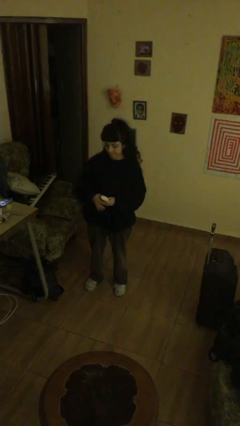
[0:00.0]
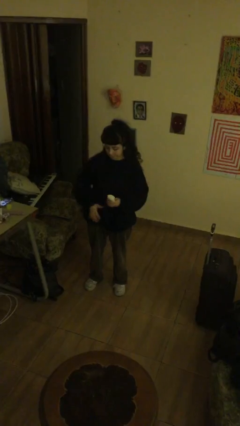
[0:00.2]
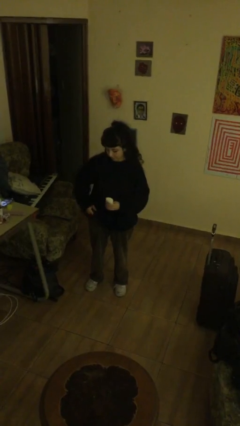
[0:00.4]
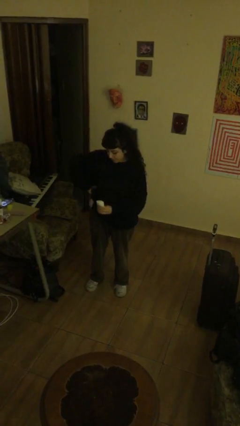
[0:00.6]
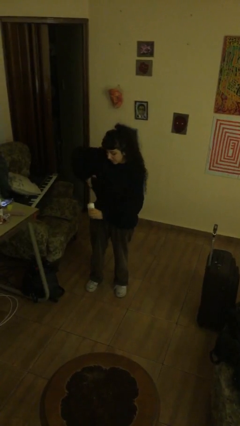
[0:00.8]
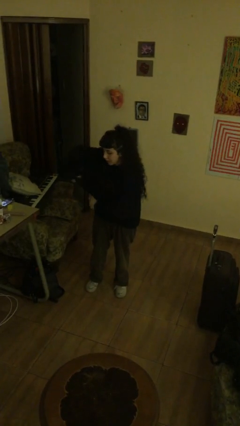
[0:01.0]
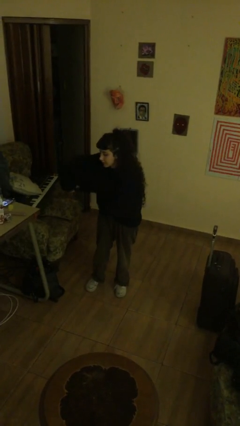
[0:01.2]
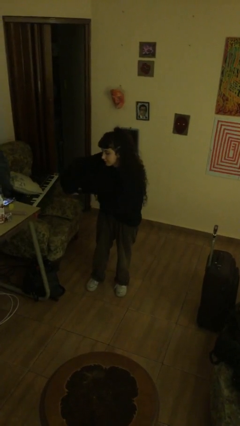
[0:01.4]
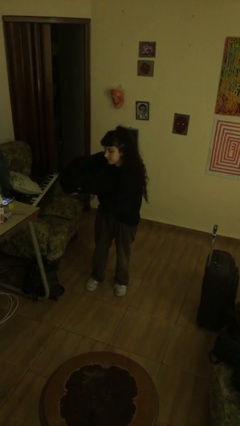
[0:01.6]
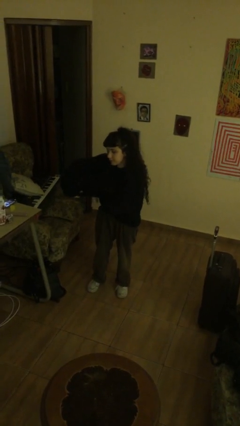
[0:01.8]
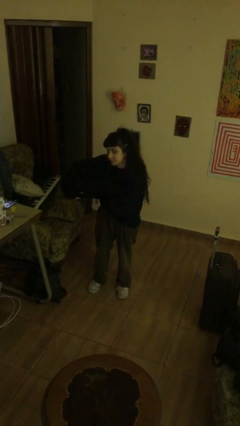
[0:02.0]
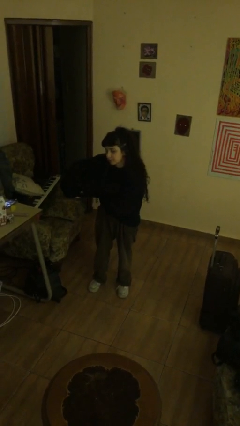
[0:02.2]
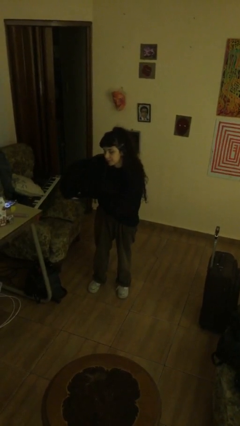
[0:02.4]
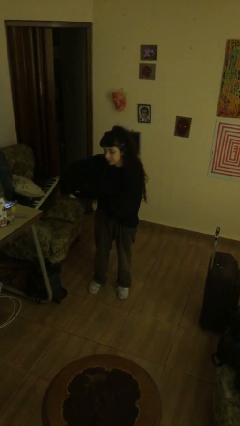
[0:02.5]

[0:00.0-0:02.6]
person applies deodorant

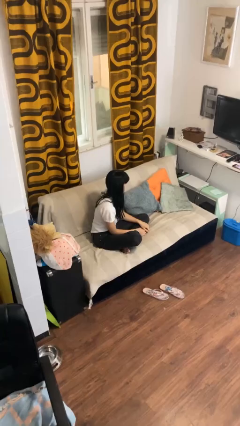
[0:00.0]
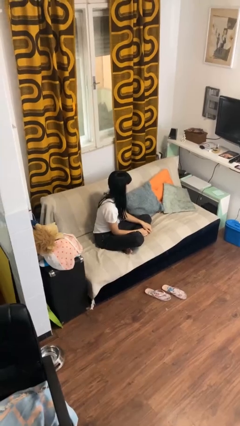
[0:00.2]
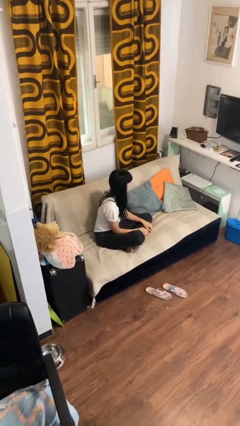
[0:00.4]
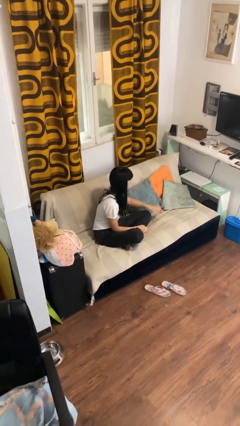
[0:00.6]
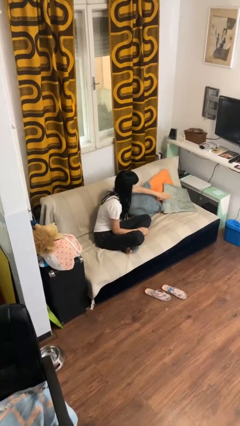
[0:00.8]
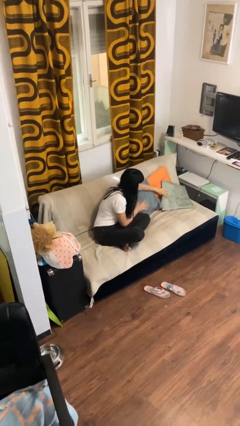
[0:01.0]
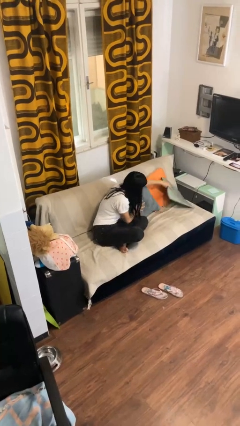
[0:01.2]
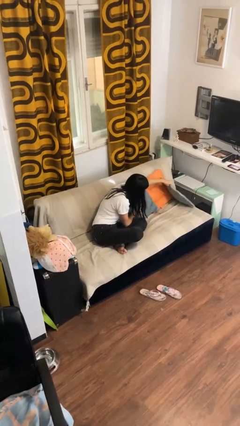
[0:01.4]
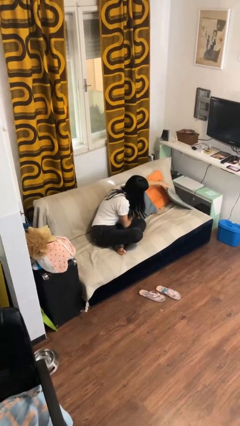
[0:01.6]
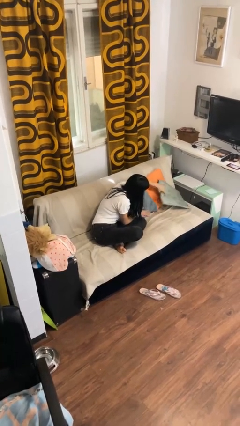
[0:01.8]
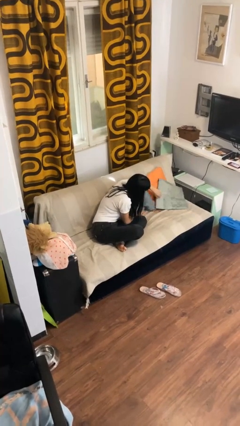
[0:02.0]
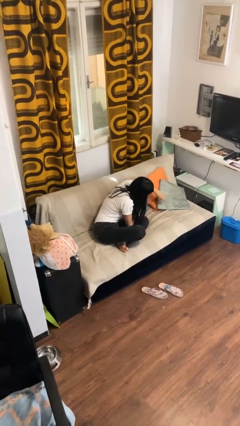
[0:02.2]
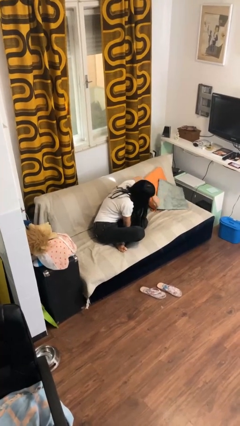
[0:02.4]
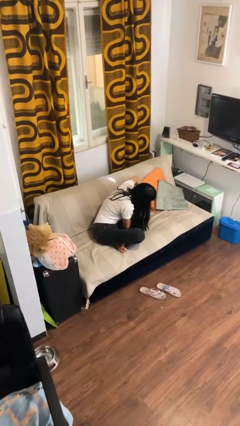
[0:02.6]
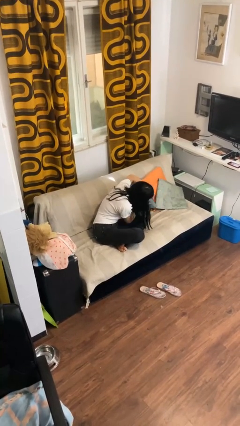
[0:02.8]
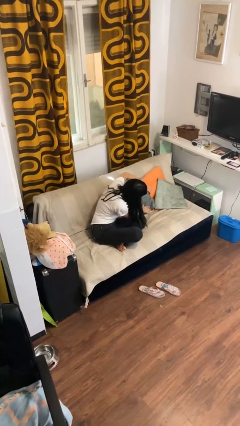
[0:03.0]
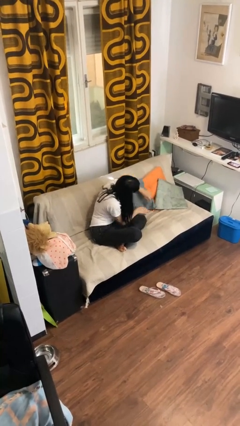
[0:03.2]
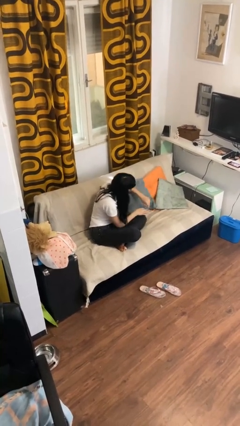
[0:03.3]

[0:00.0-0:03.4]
person searches in couch

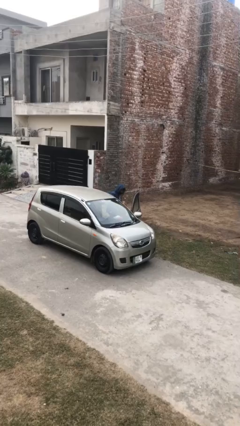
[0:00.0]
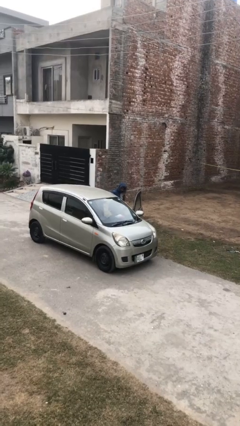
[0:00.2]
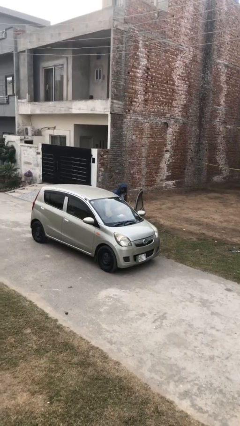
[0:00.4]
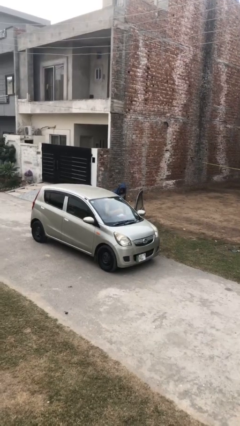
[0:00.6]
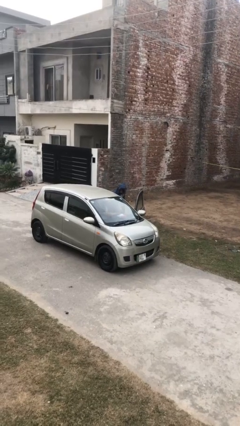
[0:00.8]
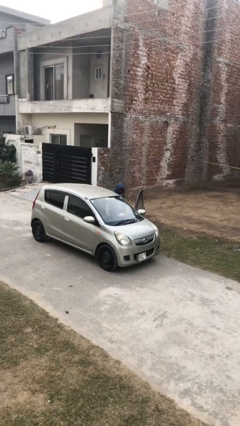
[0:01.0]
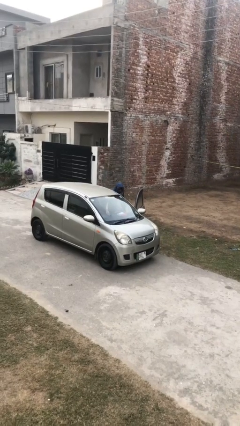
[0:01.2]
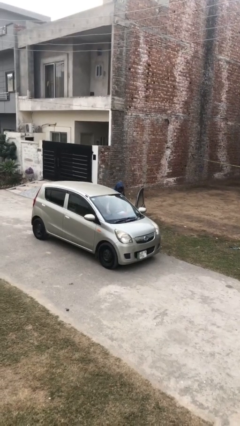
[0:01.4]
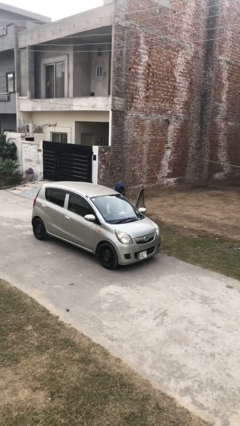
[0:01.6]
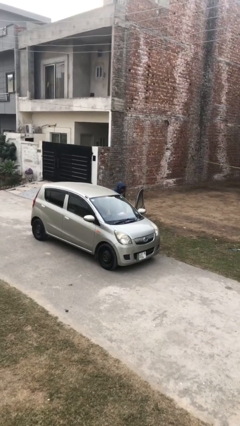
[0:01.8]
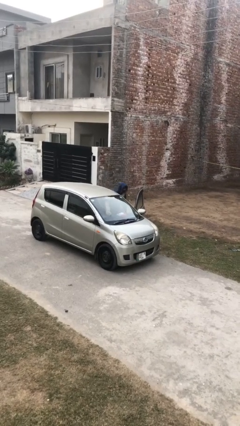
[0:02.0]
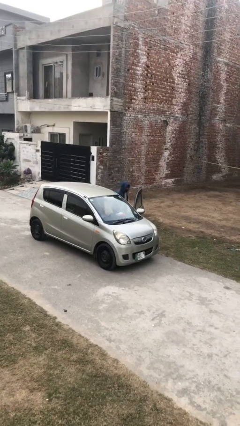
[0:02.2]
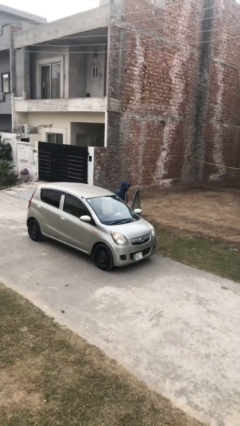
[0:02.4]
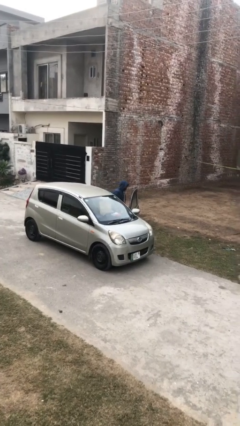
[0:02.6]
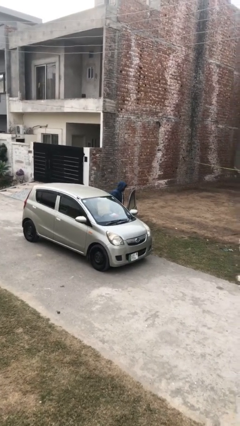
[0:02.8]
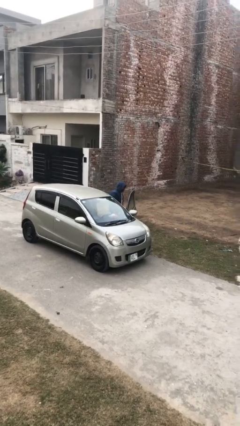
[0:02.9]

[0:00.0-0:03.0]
person loads car

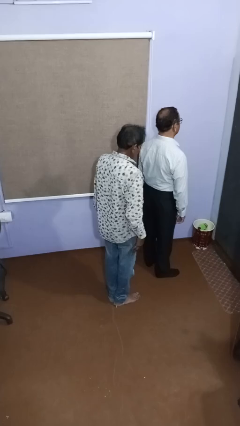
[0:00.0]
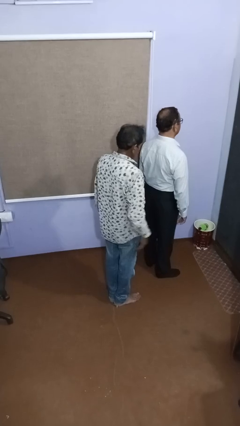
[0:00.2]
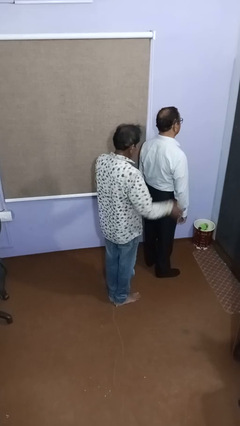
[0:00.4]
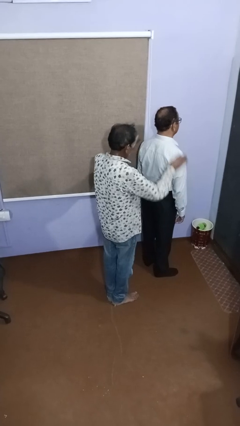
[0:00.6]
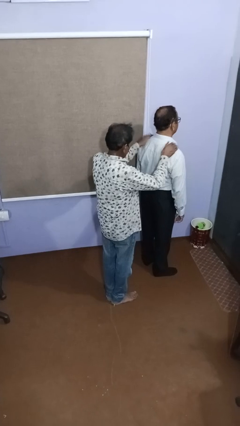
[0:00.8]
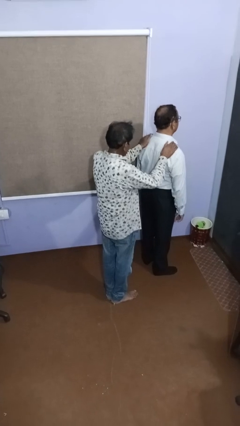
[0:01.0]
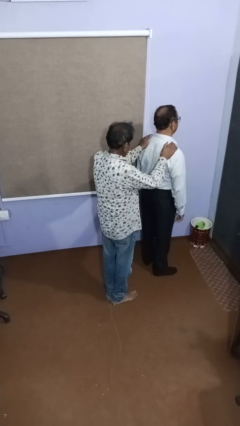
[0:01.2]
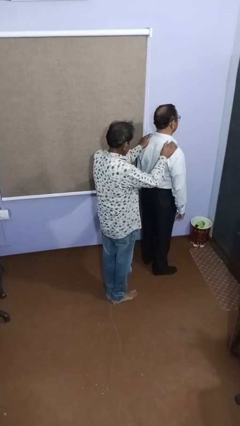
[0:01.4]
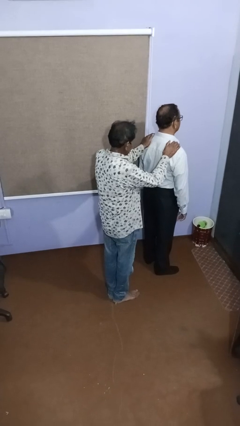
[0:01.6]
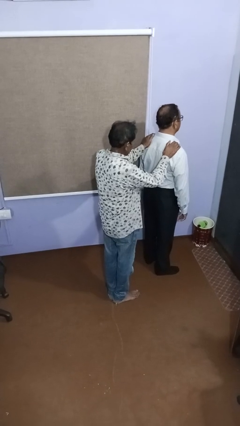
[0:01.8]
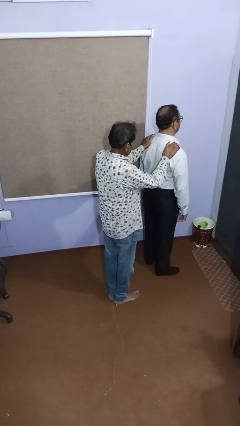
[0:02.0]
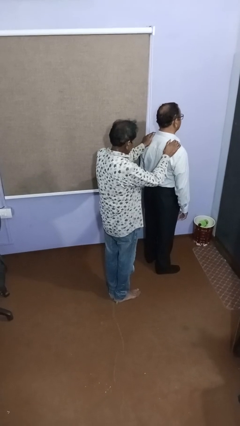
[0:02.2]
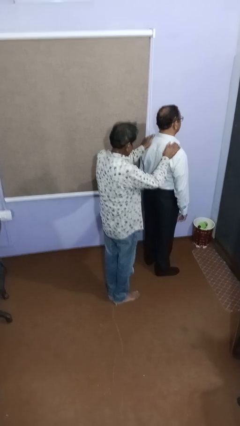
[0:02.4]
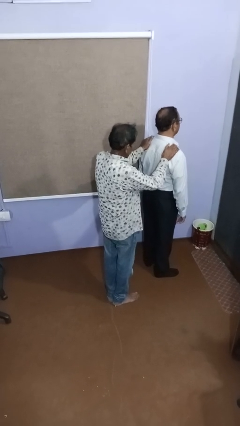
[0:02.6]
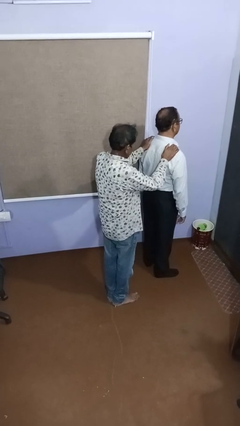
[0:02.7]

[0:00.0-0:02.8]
person grabs person by shoulder

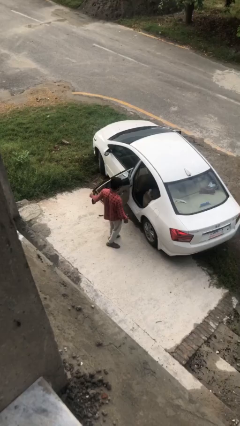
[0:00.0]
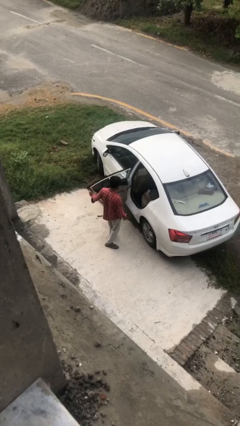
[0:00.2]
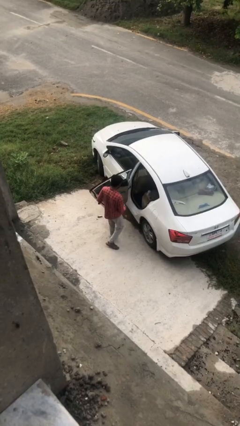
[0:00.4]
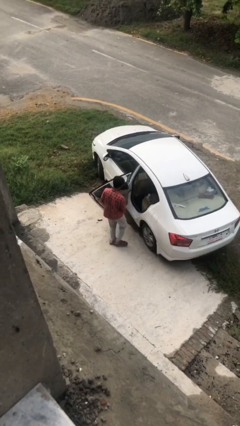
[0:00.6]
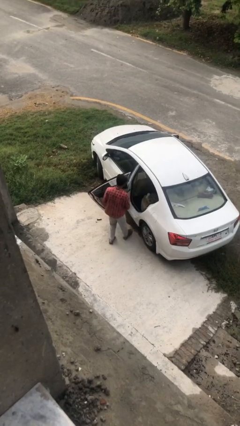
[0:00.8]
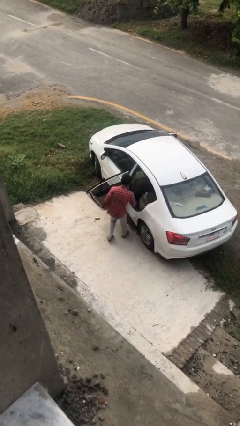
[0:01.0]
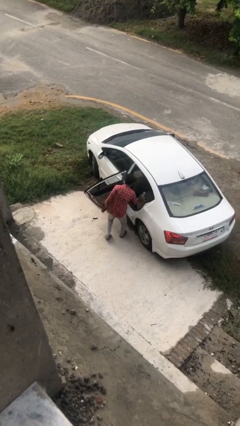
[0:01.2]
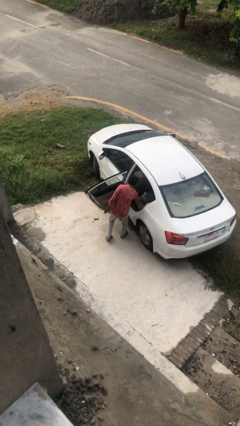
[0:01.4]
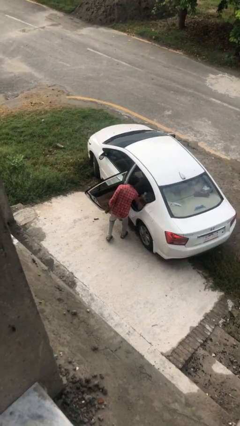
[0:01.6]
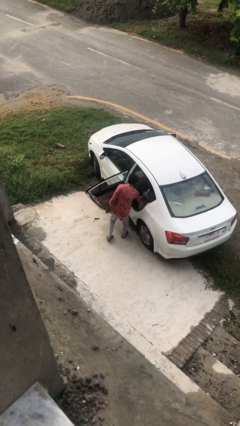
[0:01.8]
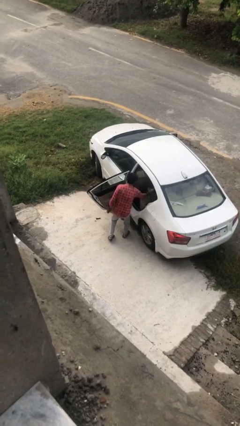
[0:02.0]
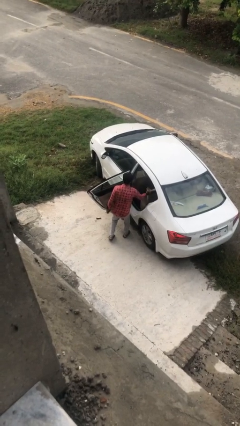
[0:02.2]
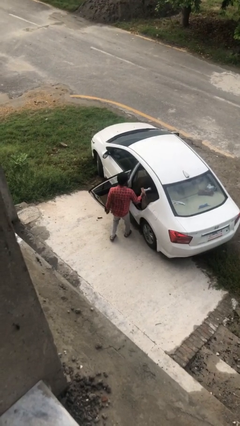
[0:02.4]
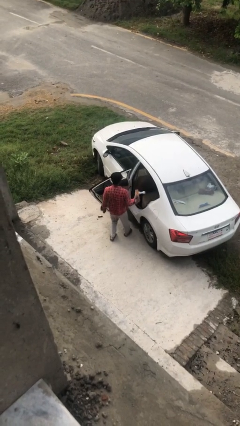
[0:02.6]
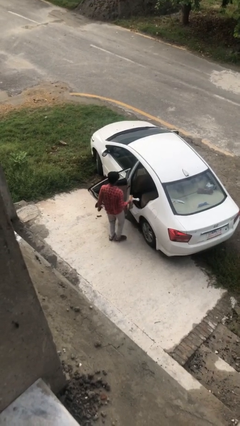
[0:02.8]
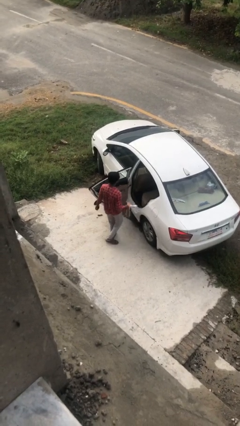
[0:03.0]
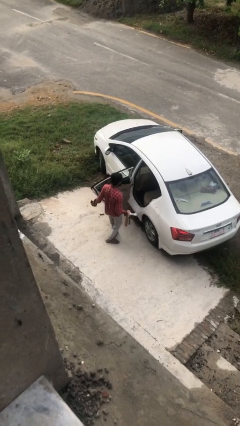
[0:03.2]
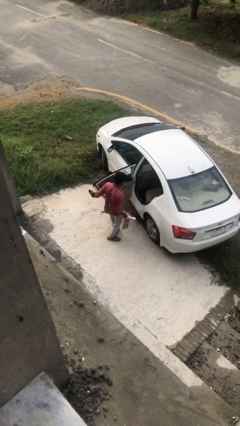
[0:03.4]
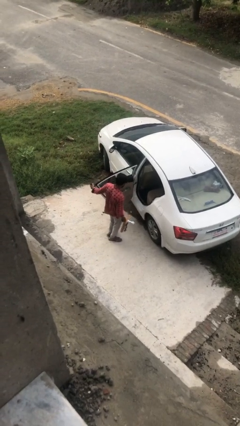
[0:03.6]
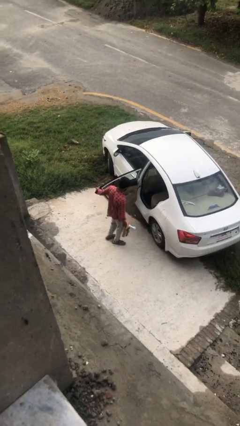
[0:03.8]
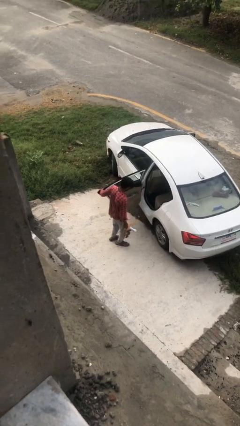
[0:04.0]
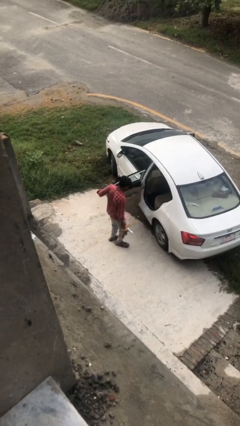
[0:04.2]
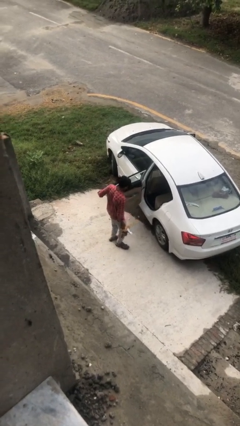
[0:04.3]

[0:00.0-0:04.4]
person unloads car

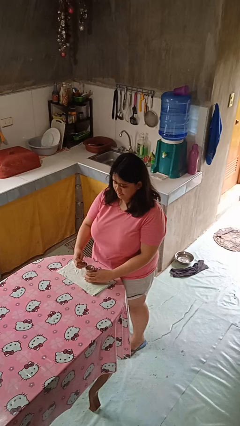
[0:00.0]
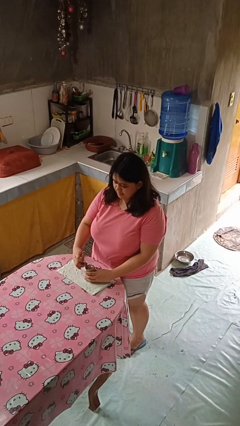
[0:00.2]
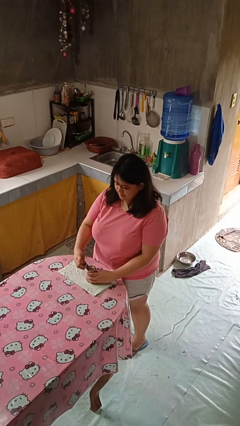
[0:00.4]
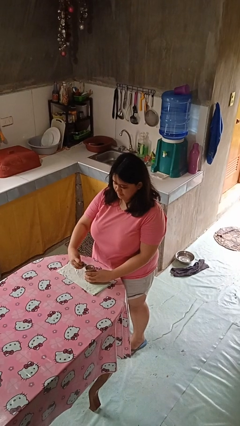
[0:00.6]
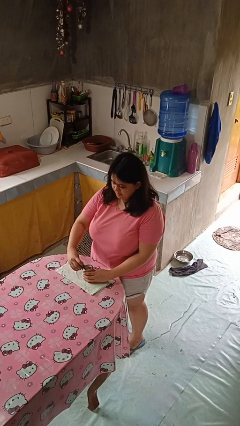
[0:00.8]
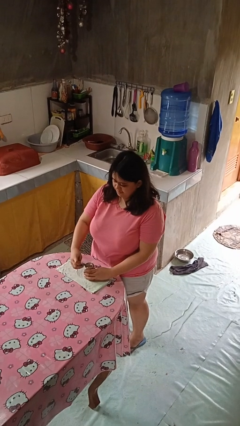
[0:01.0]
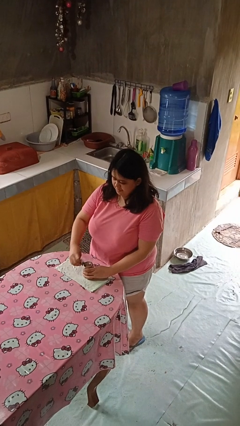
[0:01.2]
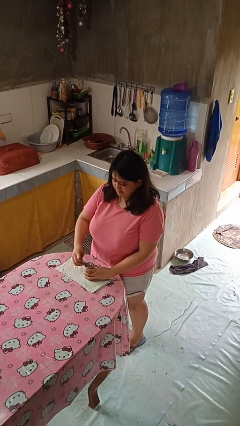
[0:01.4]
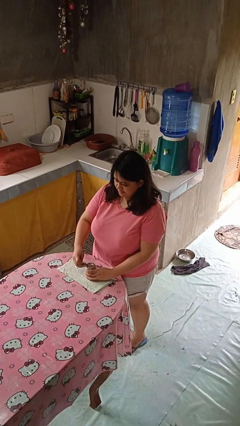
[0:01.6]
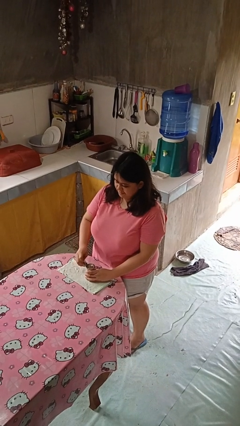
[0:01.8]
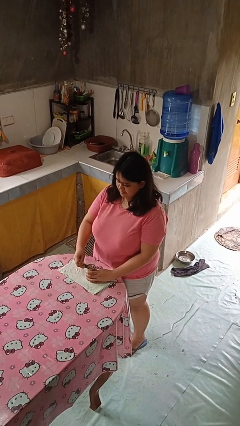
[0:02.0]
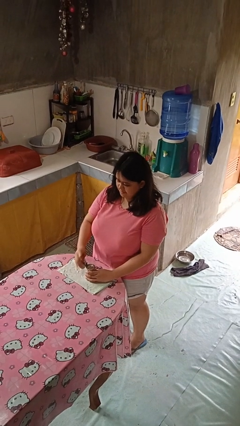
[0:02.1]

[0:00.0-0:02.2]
person opens can with can opener
